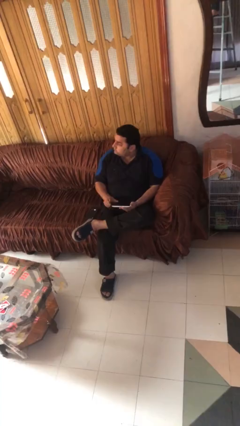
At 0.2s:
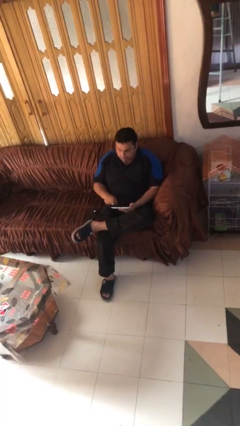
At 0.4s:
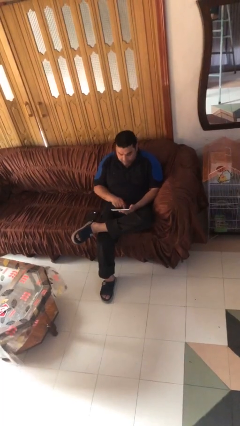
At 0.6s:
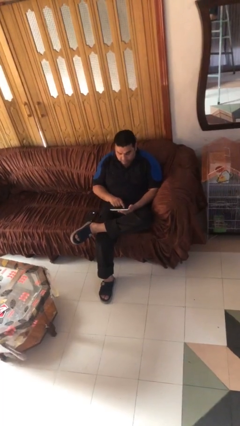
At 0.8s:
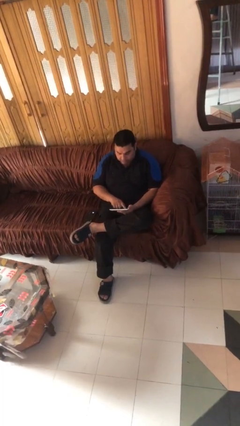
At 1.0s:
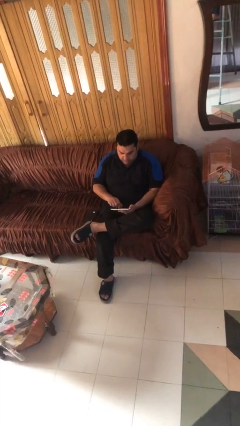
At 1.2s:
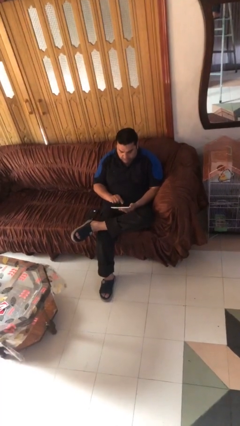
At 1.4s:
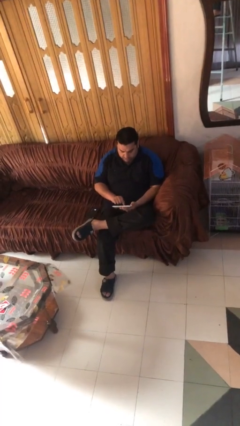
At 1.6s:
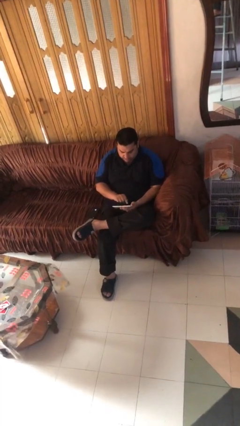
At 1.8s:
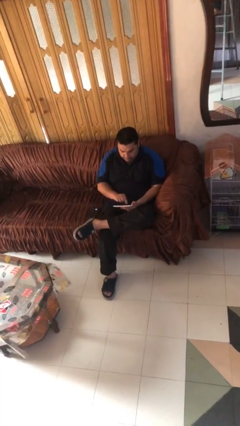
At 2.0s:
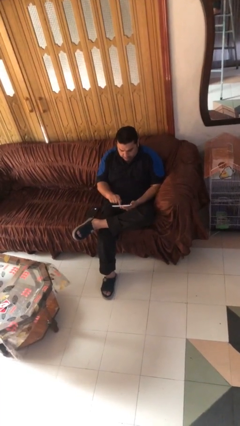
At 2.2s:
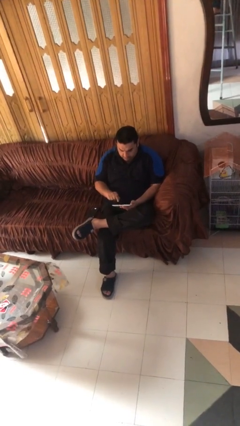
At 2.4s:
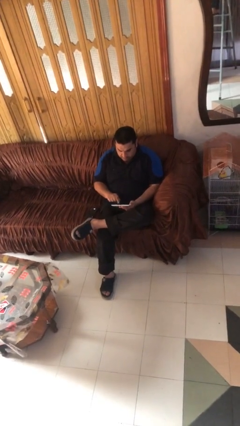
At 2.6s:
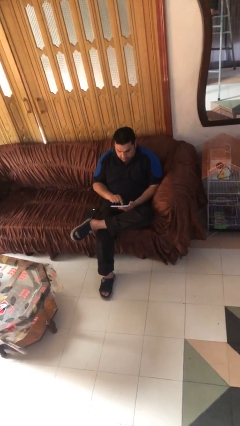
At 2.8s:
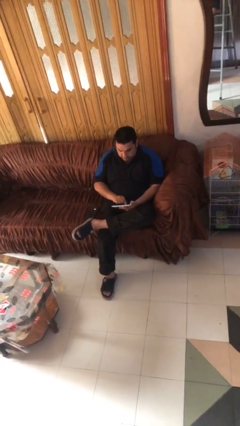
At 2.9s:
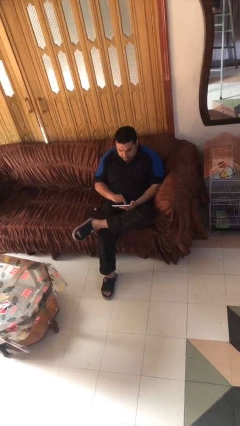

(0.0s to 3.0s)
person interacts with tablet

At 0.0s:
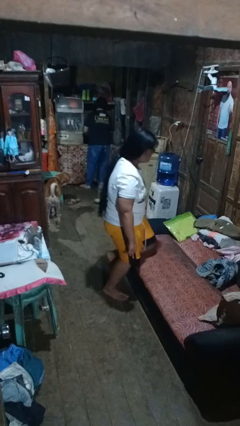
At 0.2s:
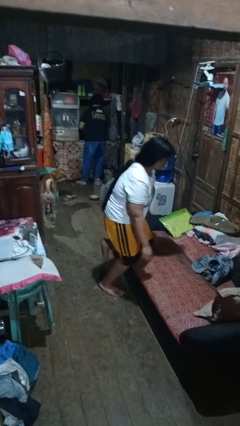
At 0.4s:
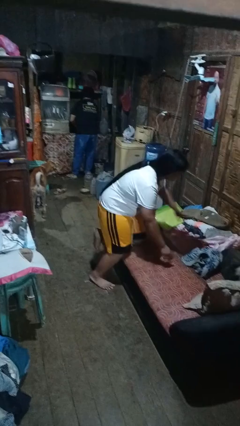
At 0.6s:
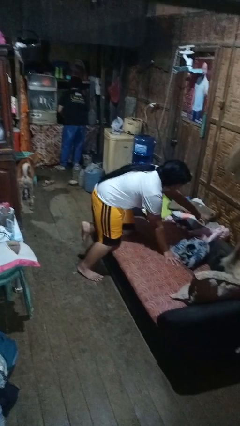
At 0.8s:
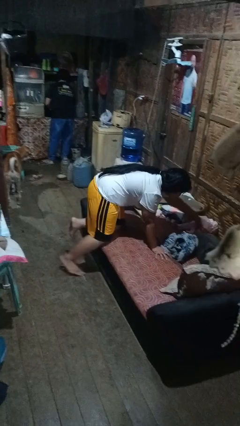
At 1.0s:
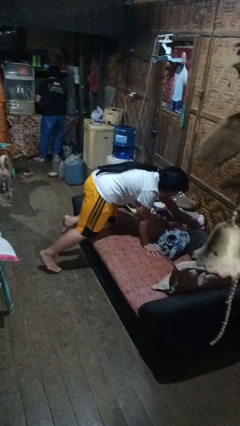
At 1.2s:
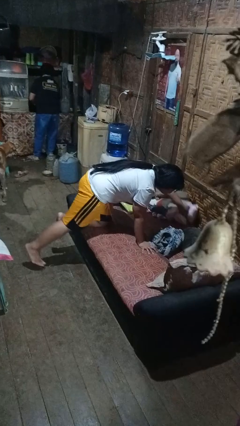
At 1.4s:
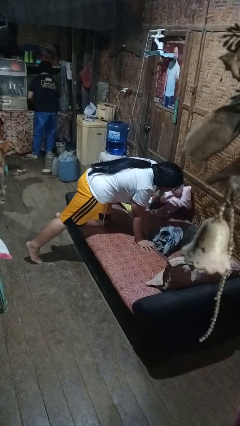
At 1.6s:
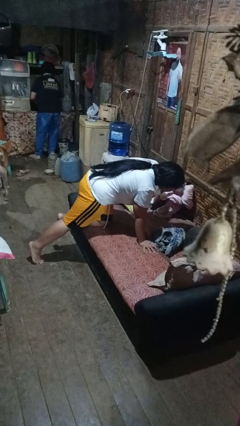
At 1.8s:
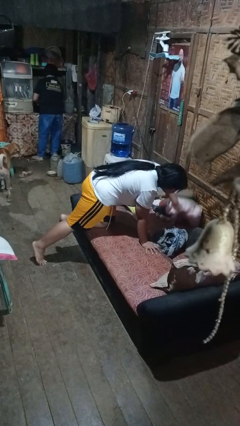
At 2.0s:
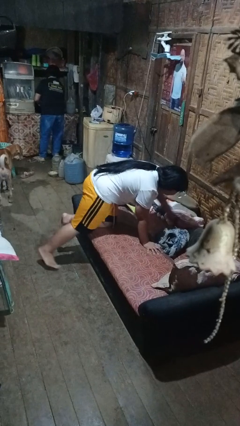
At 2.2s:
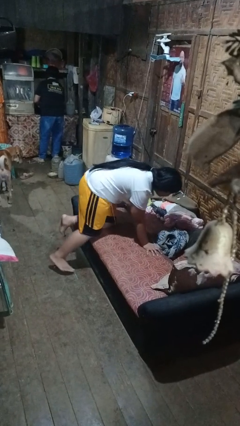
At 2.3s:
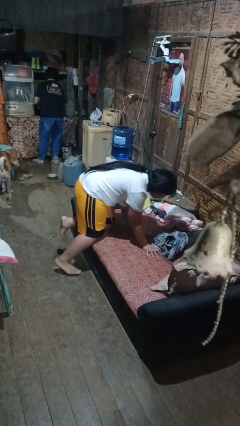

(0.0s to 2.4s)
person searches in couch

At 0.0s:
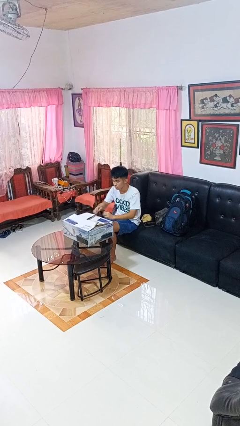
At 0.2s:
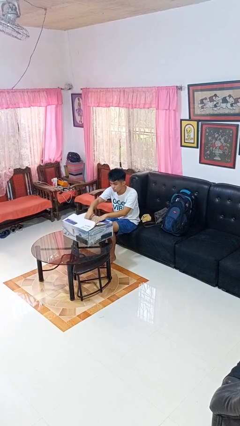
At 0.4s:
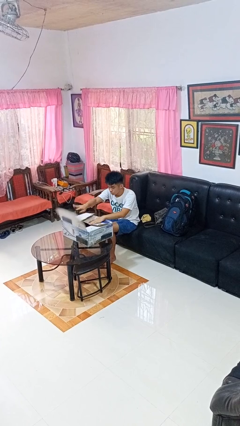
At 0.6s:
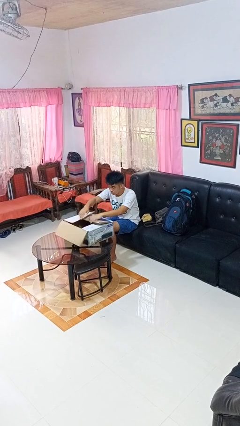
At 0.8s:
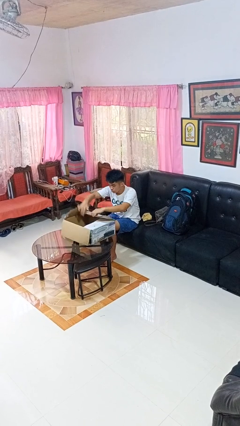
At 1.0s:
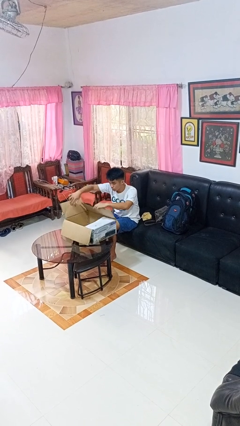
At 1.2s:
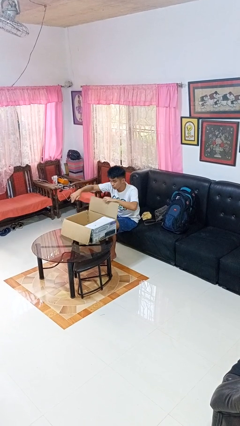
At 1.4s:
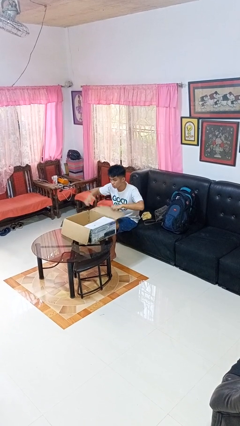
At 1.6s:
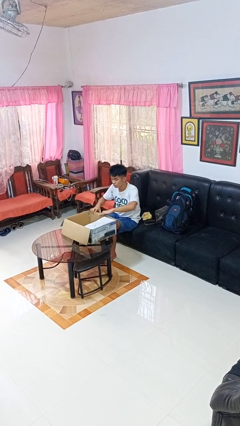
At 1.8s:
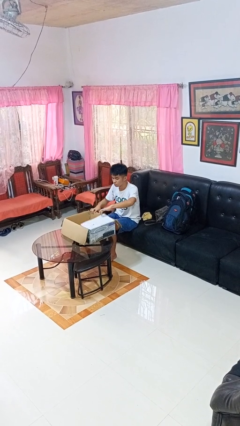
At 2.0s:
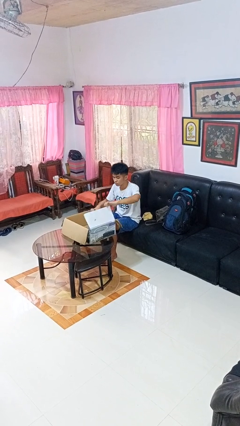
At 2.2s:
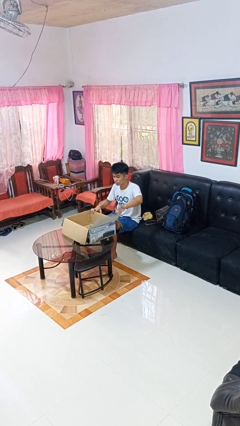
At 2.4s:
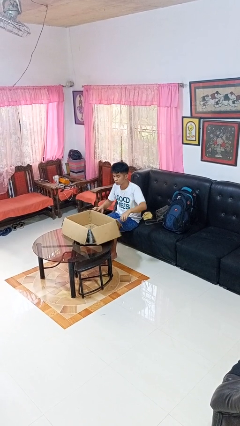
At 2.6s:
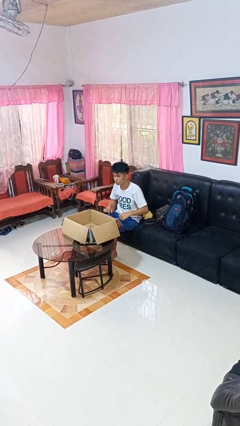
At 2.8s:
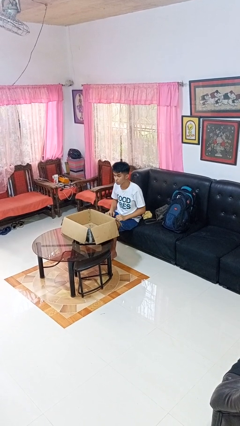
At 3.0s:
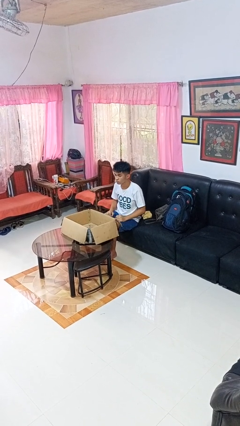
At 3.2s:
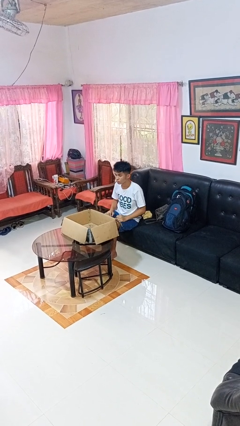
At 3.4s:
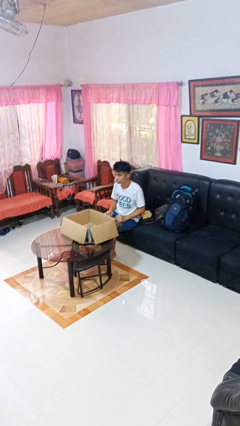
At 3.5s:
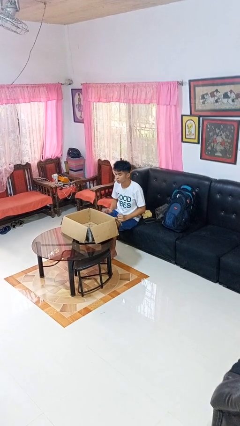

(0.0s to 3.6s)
person opens box

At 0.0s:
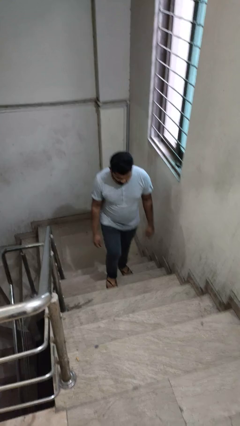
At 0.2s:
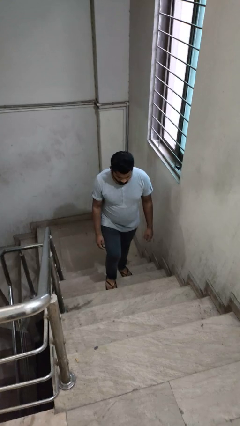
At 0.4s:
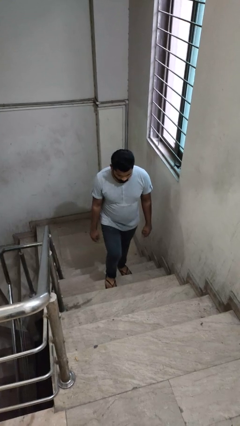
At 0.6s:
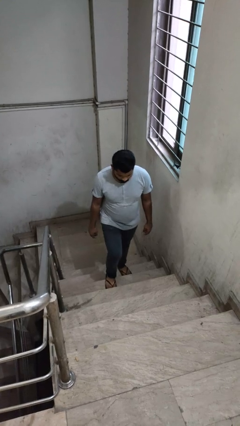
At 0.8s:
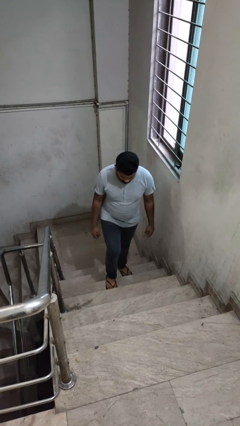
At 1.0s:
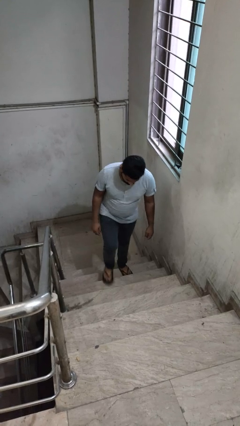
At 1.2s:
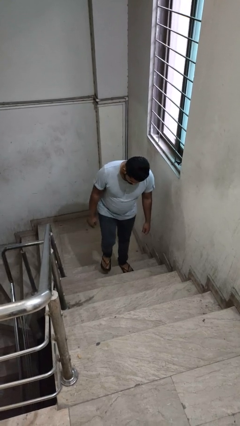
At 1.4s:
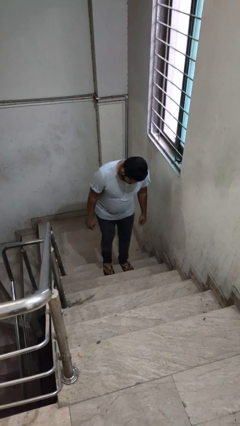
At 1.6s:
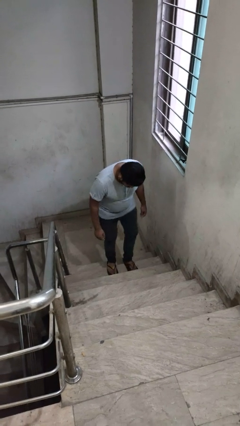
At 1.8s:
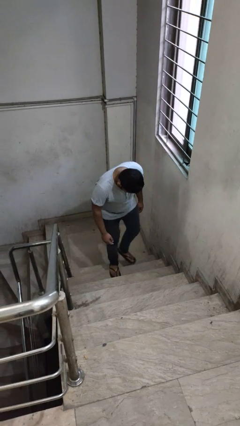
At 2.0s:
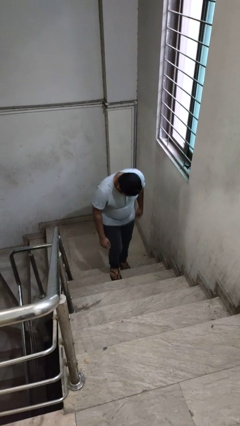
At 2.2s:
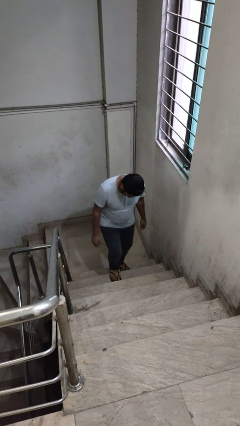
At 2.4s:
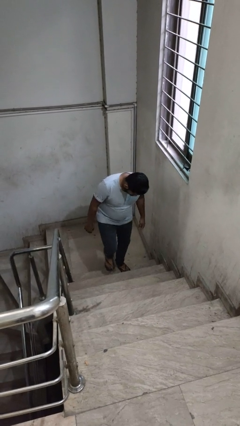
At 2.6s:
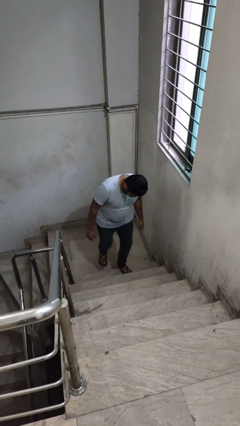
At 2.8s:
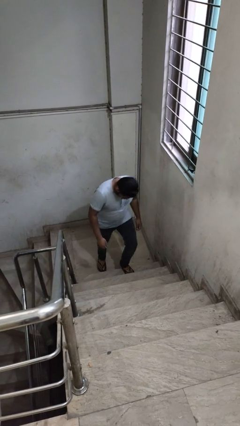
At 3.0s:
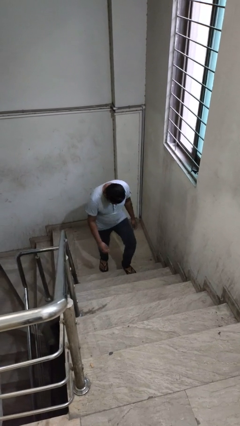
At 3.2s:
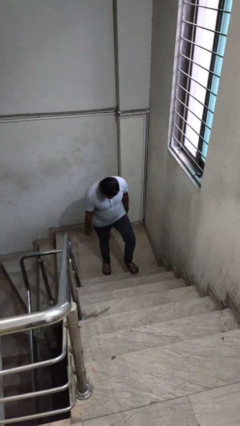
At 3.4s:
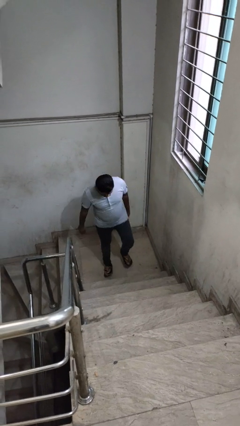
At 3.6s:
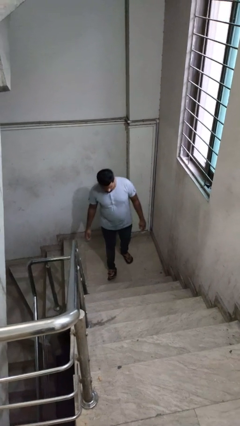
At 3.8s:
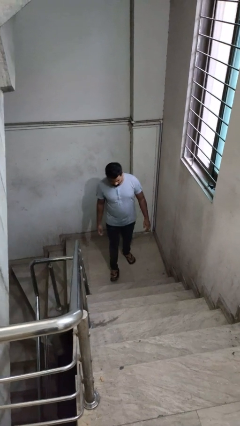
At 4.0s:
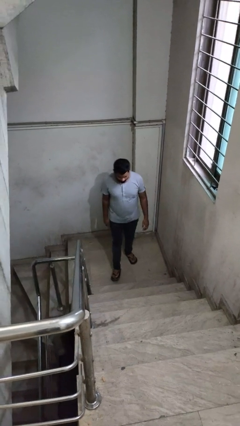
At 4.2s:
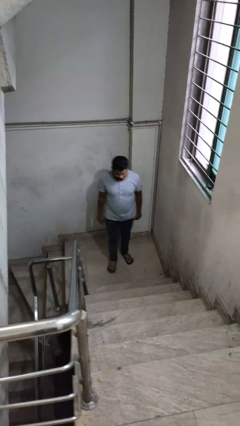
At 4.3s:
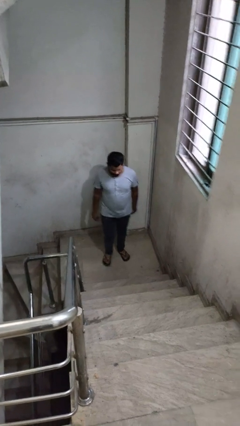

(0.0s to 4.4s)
person climbs down stairs

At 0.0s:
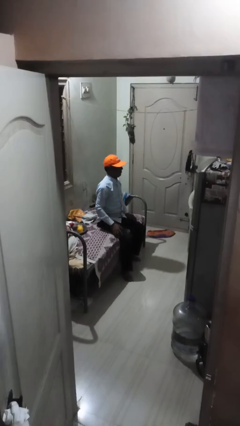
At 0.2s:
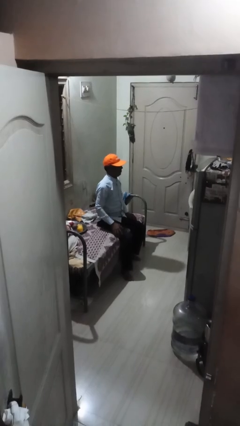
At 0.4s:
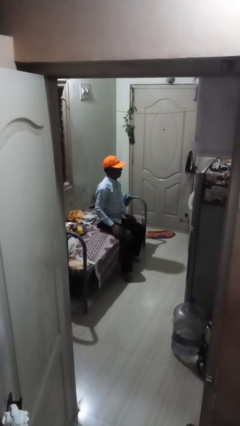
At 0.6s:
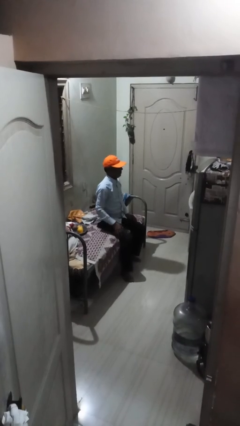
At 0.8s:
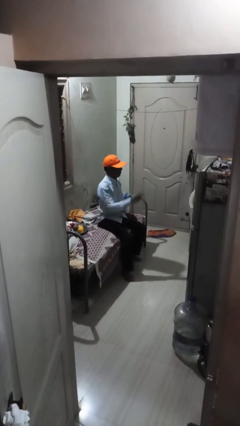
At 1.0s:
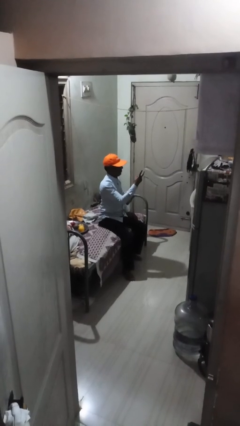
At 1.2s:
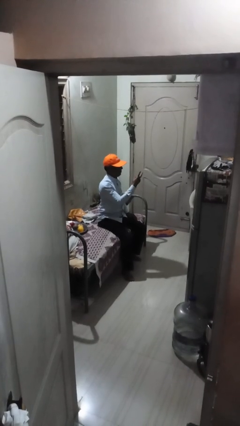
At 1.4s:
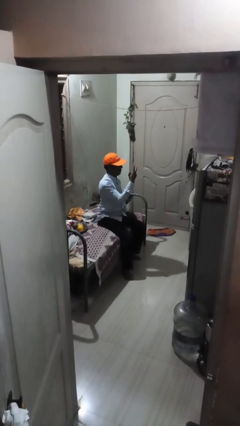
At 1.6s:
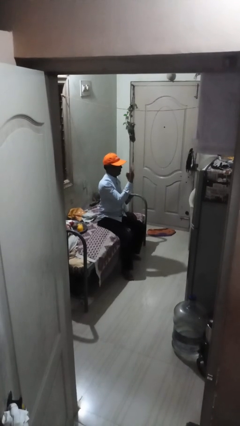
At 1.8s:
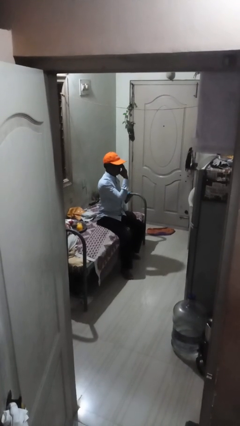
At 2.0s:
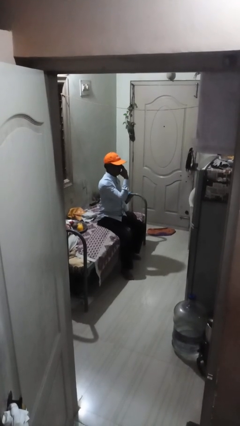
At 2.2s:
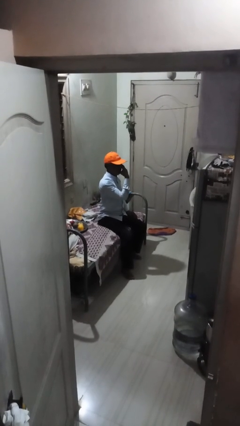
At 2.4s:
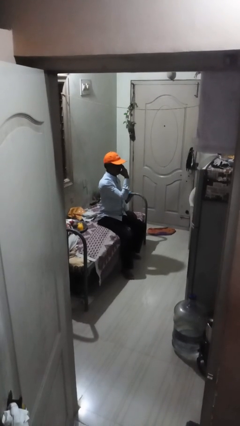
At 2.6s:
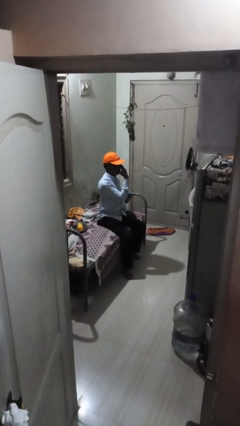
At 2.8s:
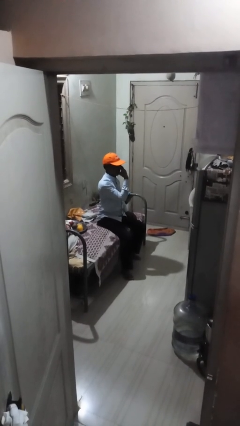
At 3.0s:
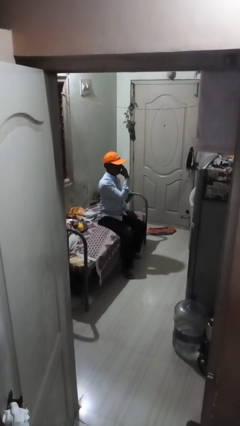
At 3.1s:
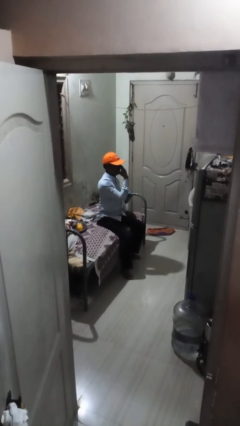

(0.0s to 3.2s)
person gestures watch closely

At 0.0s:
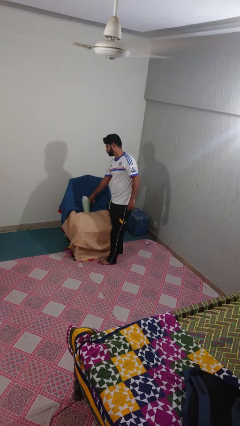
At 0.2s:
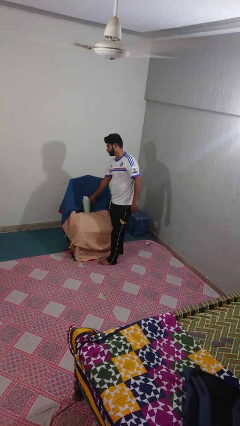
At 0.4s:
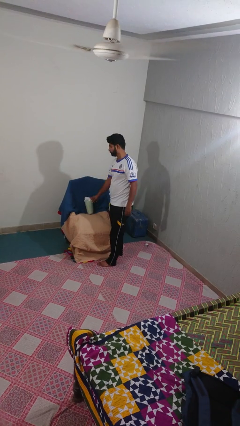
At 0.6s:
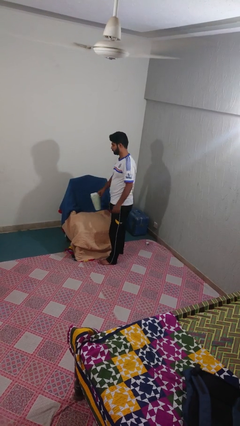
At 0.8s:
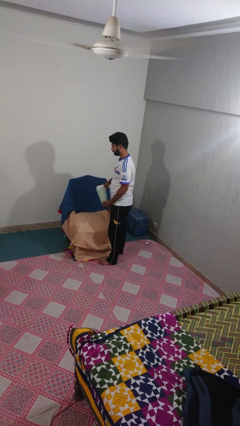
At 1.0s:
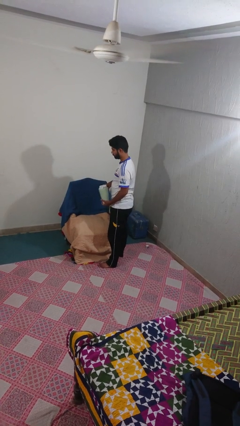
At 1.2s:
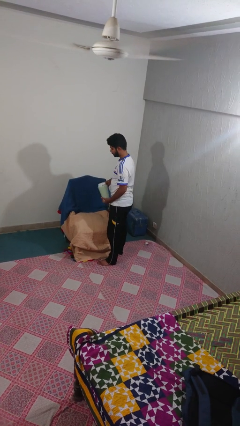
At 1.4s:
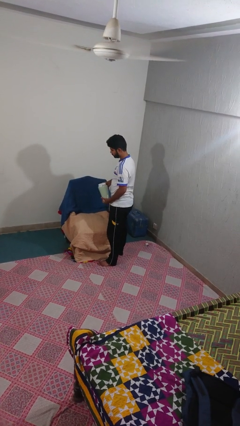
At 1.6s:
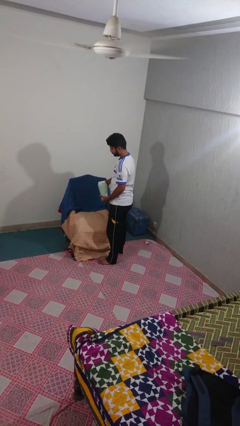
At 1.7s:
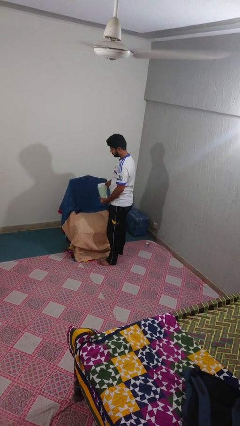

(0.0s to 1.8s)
person picks up object from couch
